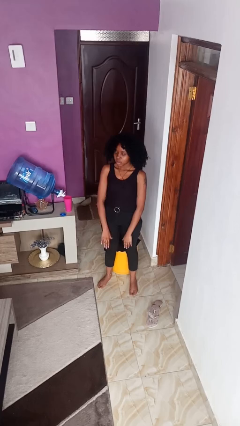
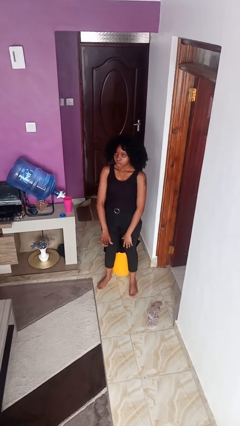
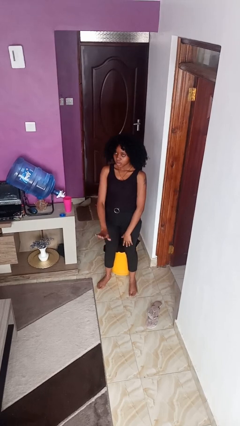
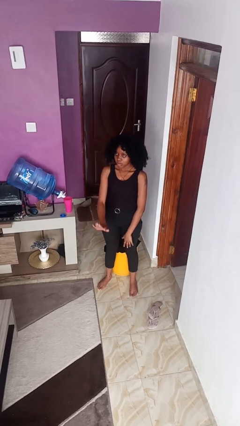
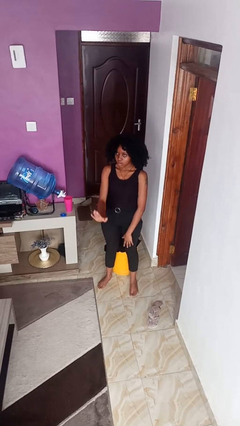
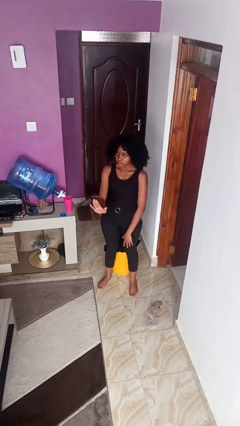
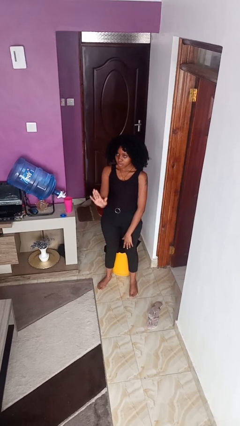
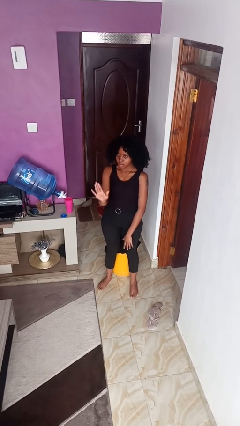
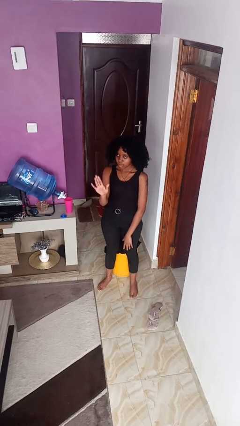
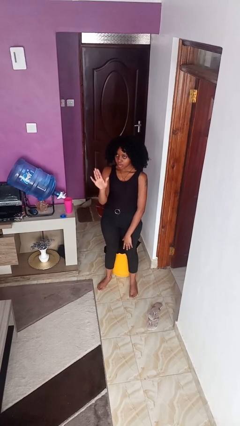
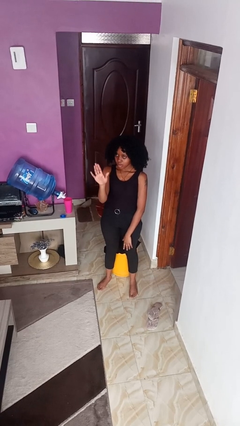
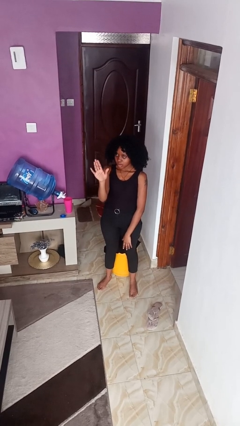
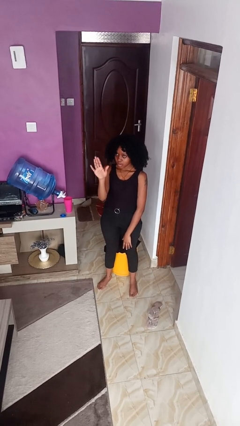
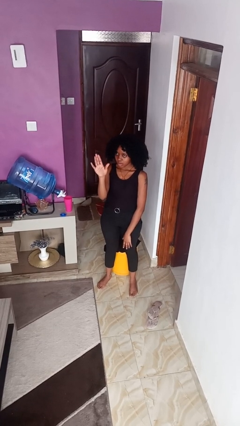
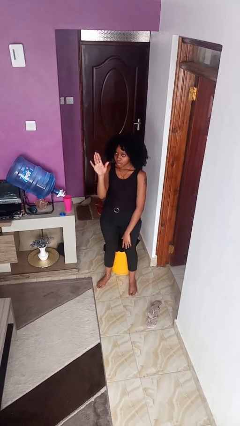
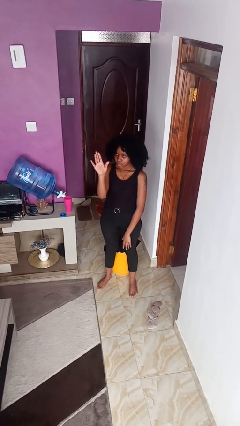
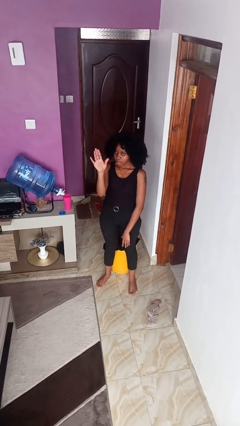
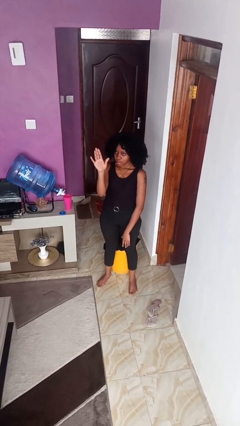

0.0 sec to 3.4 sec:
person gestures swipe up

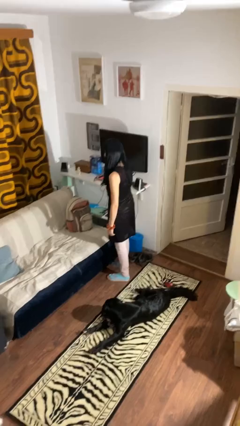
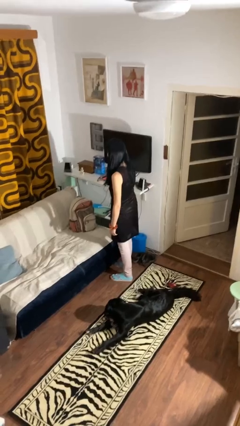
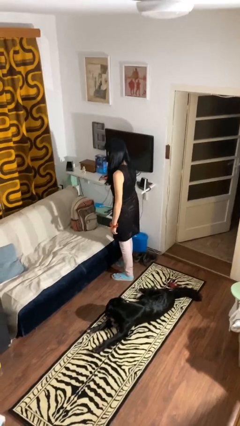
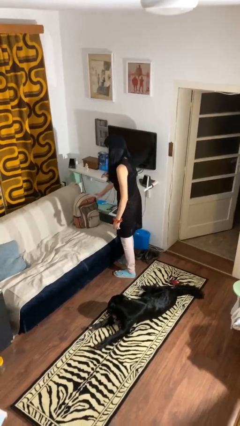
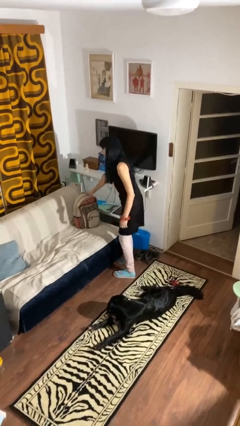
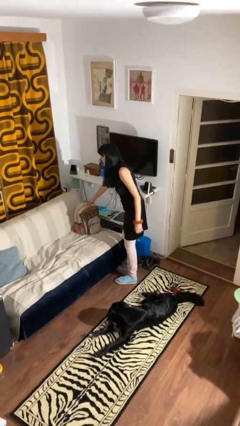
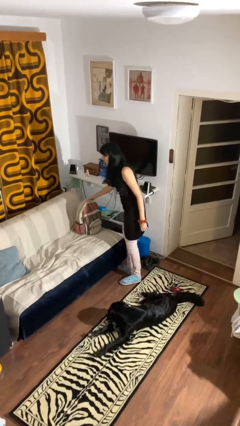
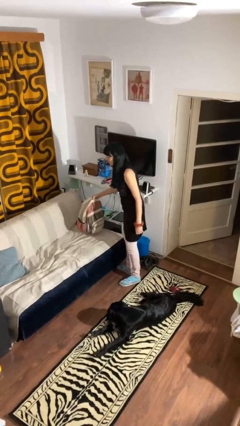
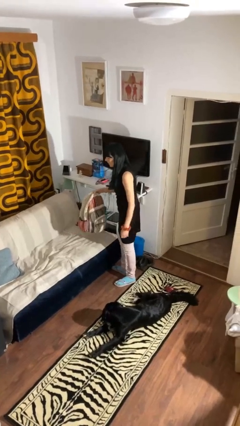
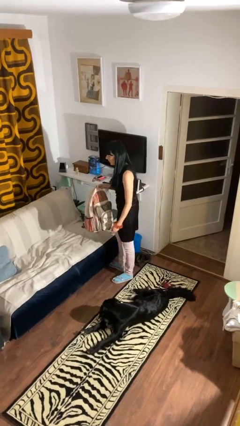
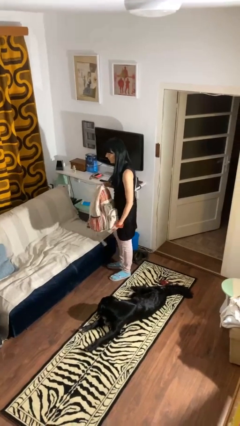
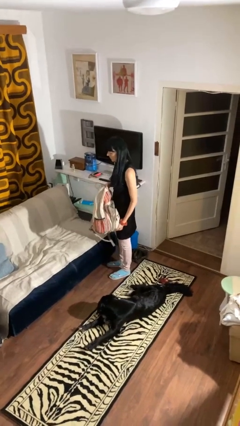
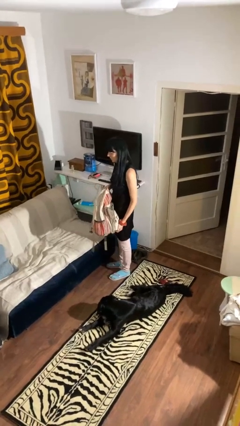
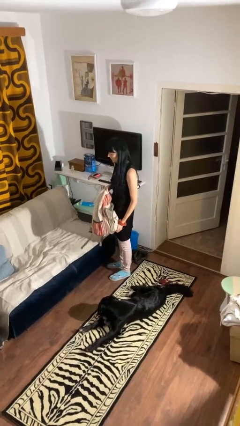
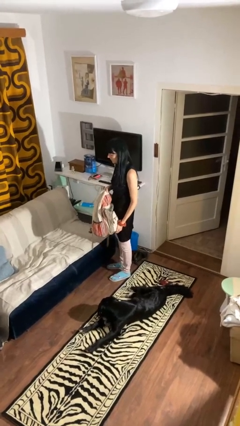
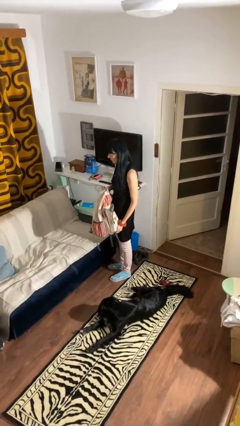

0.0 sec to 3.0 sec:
person picks up object from couch

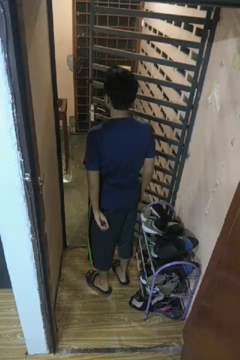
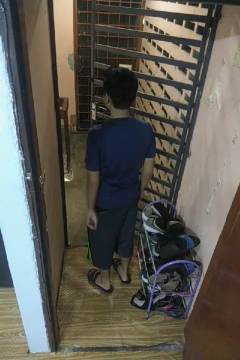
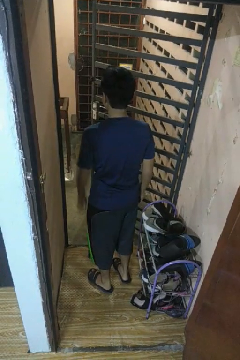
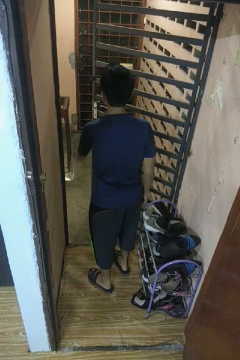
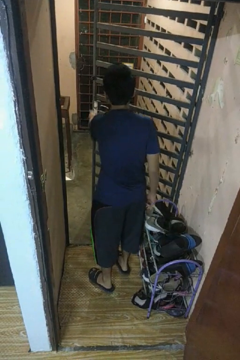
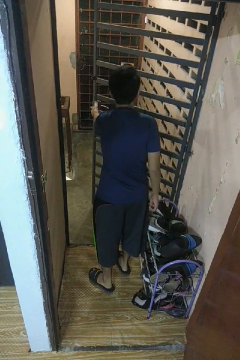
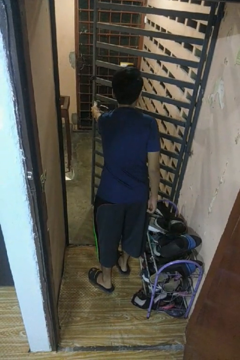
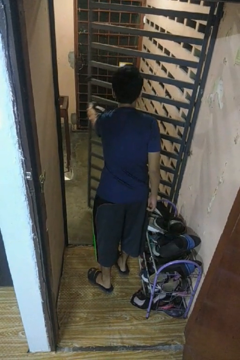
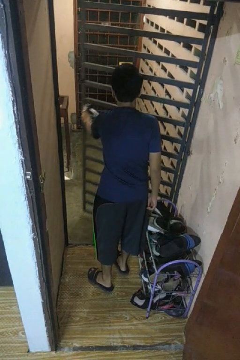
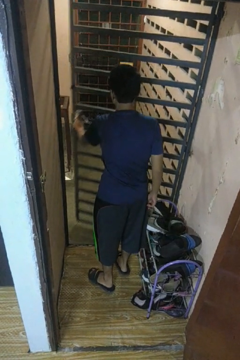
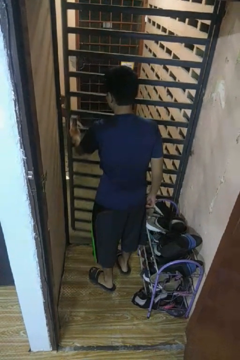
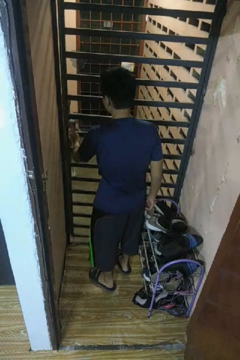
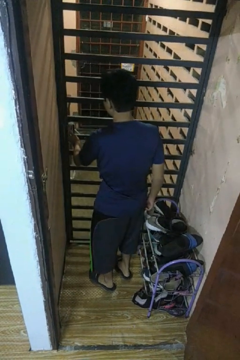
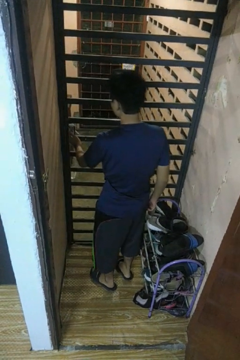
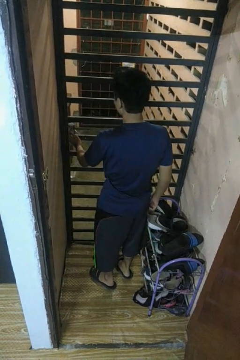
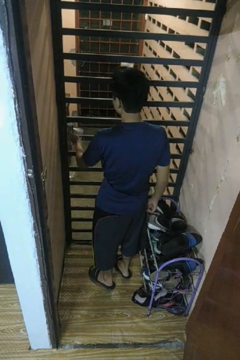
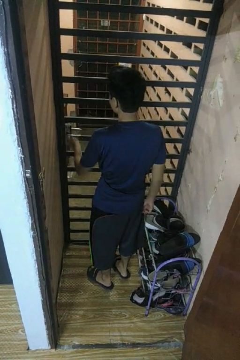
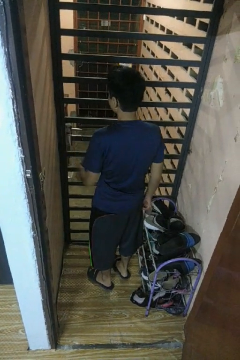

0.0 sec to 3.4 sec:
person closes gate

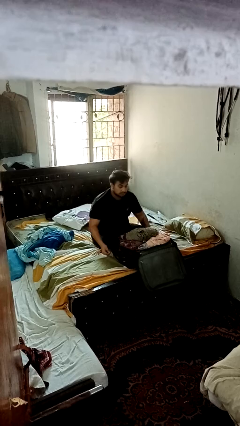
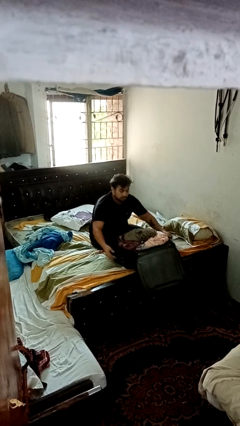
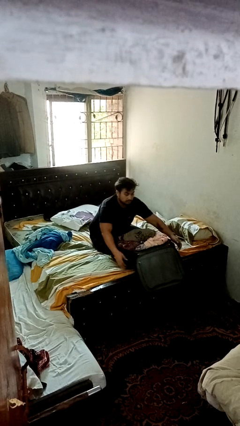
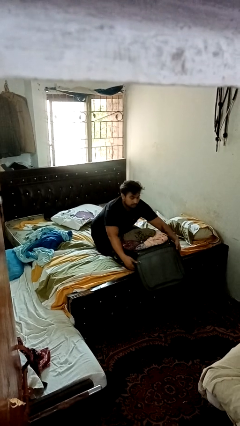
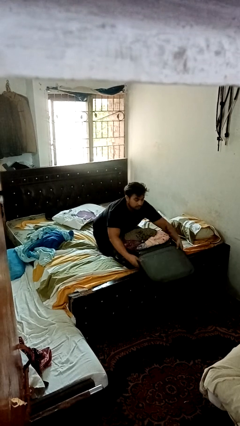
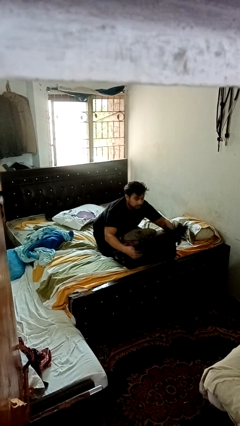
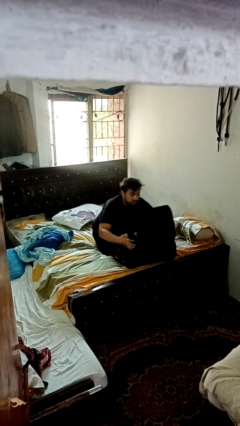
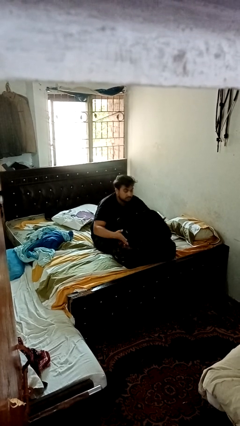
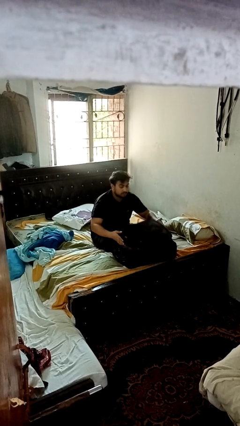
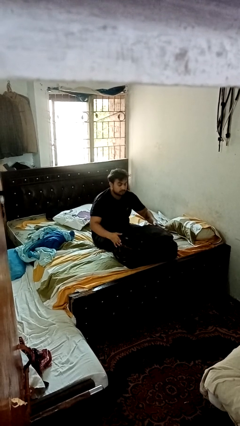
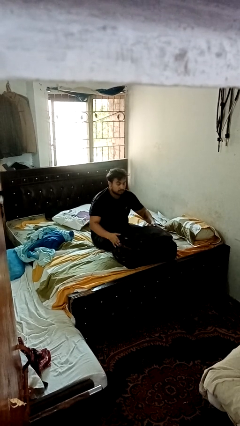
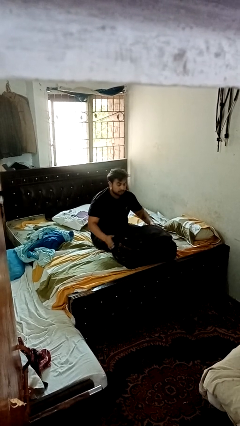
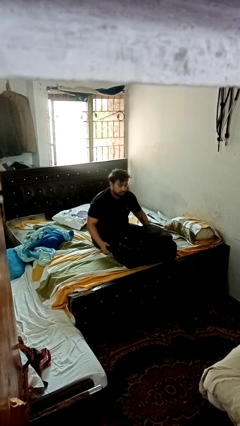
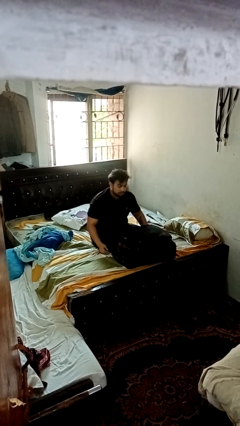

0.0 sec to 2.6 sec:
person closes suitcase

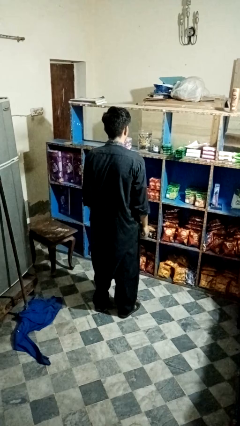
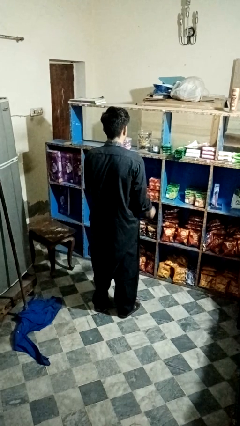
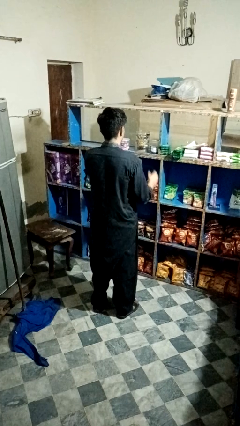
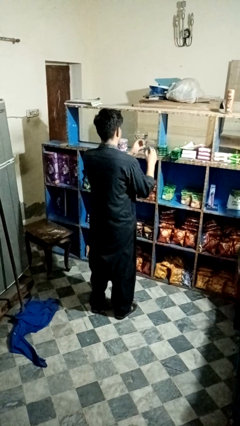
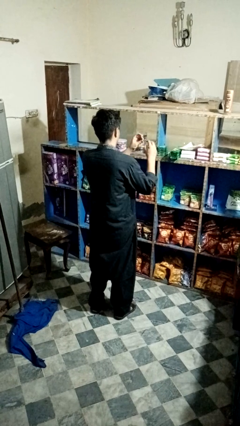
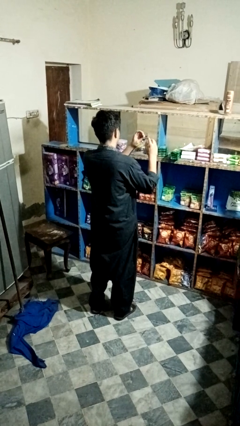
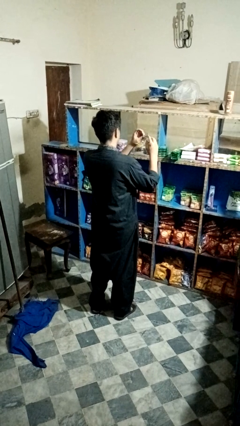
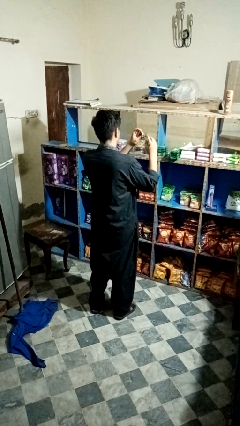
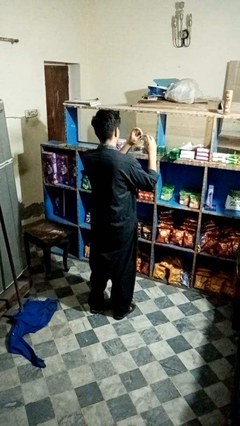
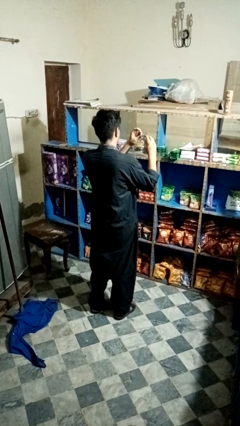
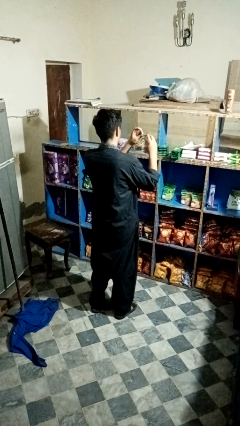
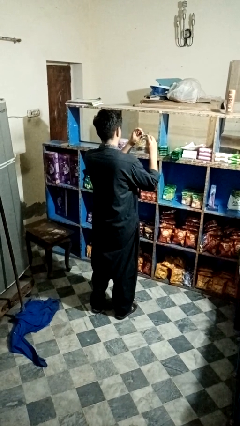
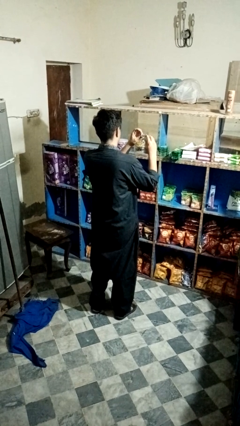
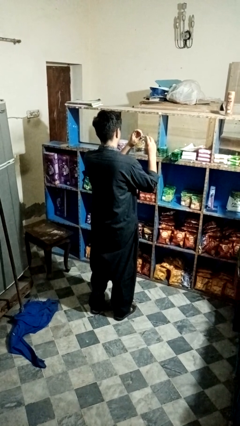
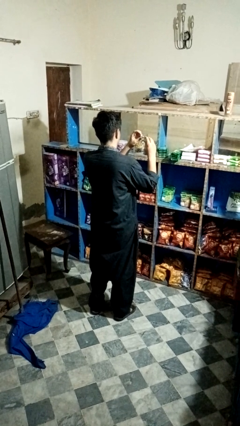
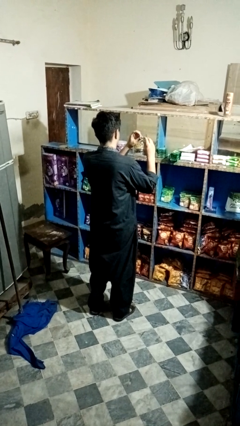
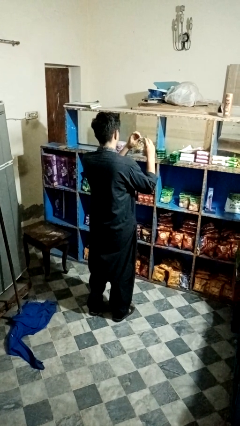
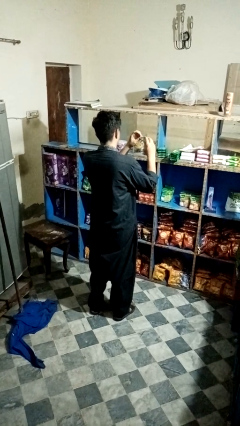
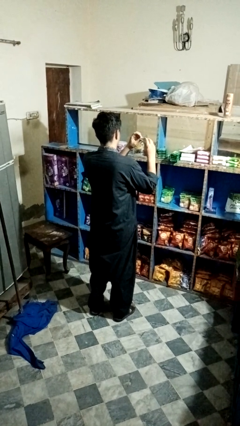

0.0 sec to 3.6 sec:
person clips fingernails

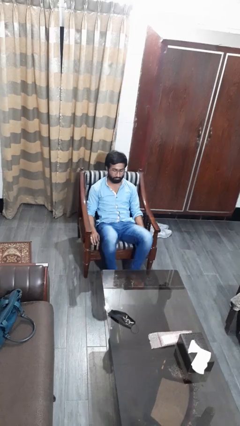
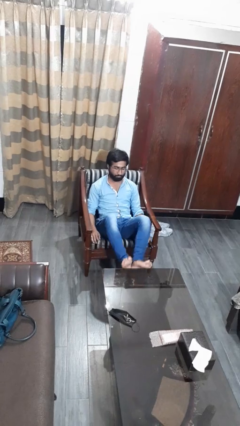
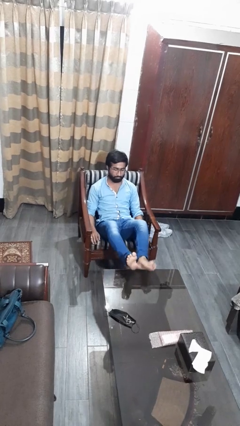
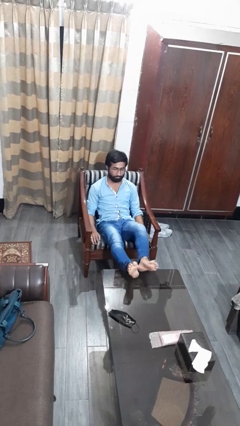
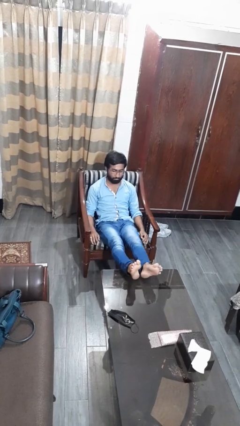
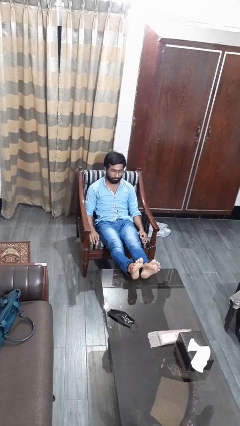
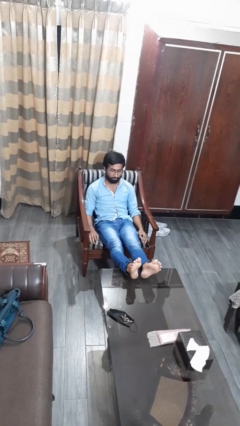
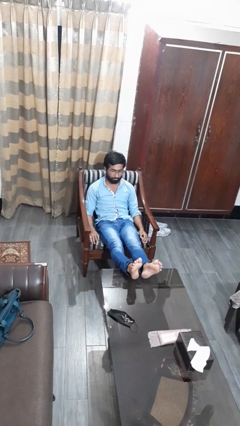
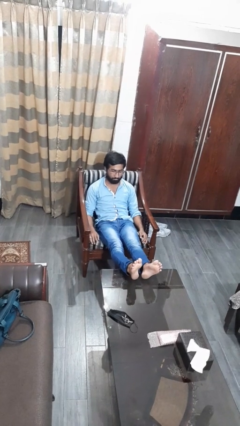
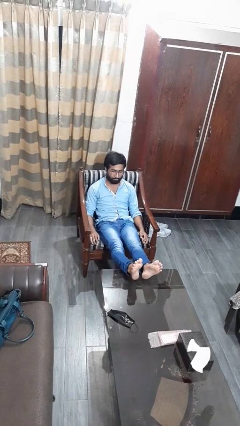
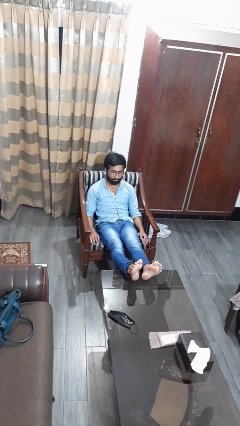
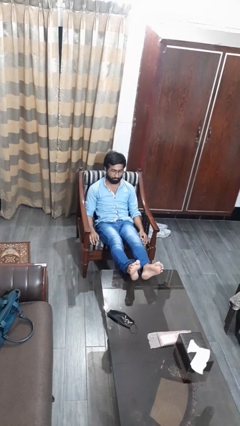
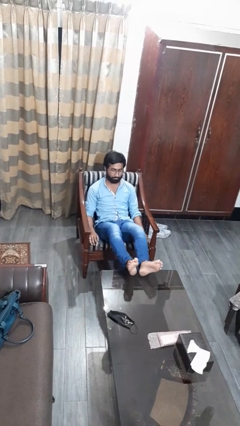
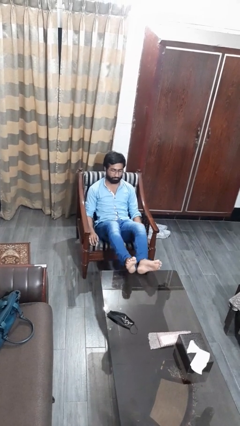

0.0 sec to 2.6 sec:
person puts feet up
